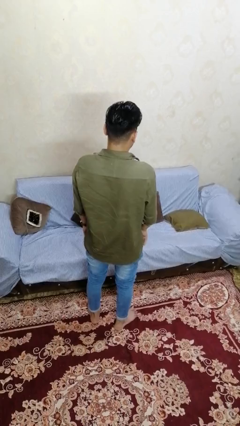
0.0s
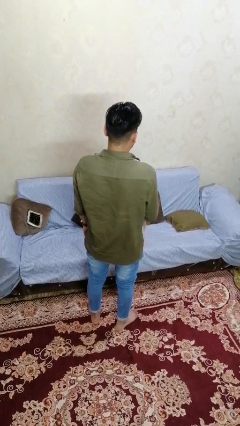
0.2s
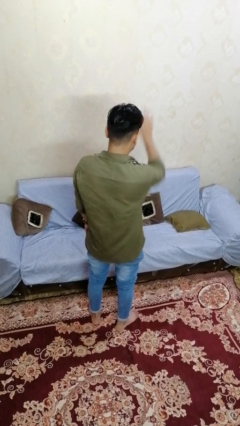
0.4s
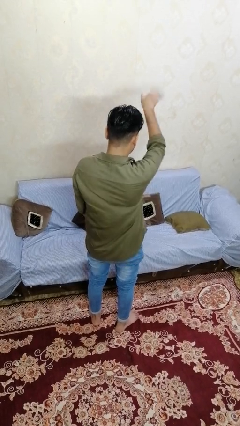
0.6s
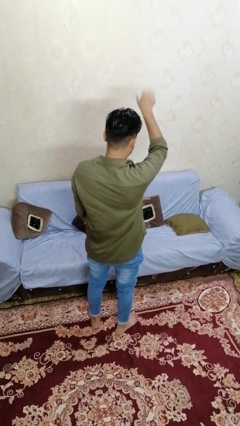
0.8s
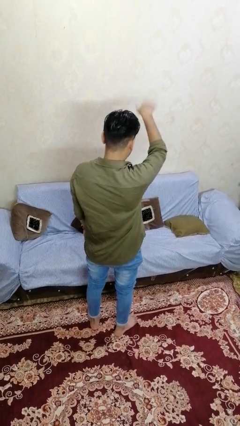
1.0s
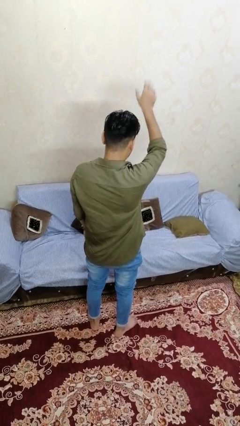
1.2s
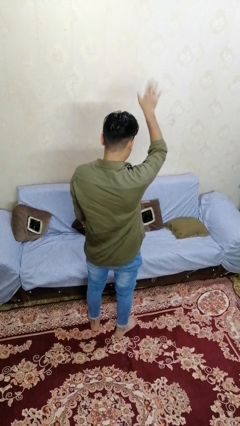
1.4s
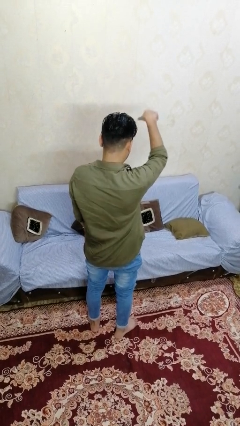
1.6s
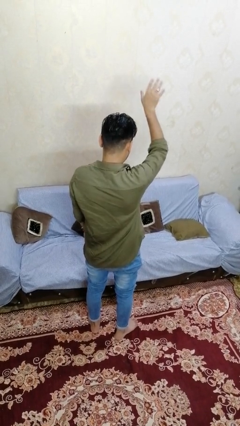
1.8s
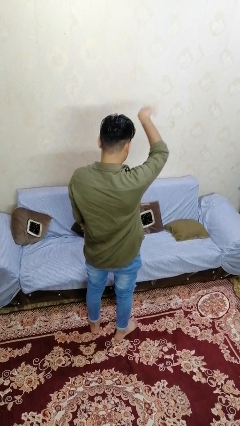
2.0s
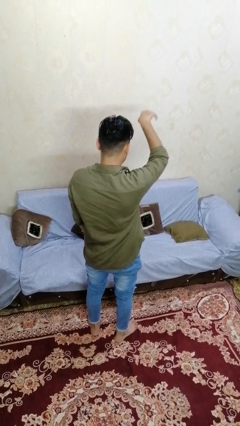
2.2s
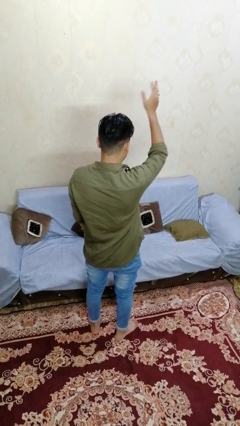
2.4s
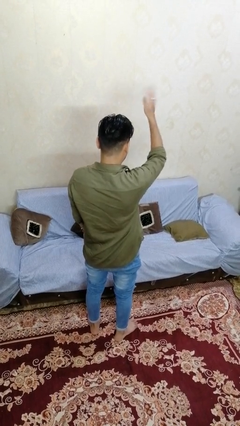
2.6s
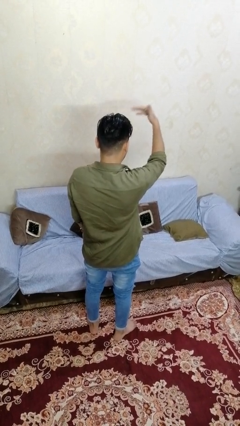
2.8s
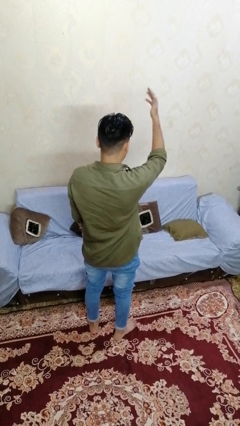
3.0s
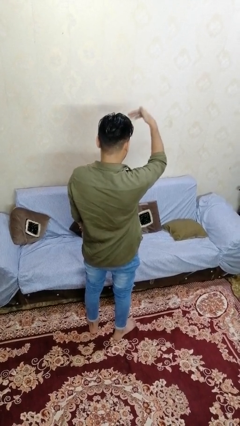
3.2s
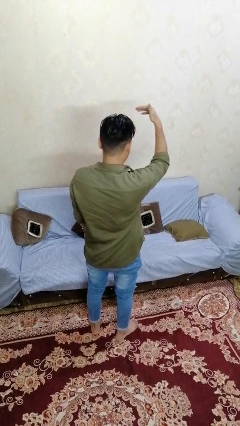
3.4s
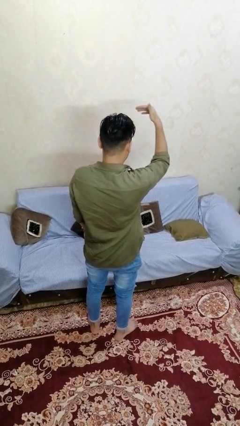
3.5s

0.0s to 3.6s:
person gestures come here

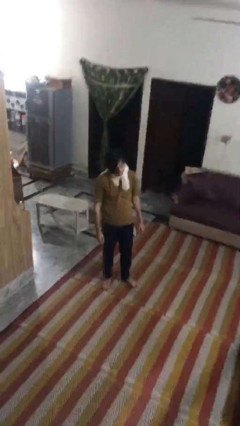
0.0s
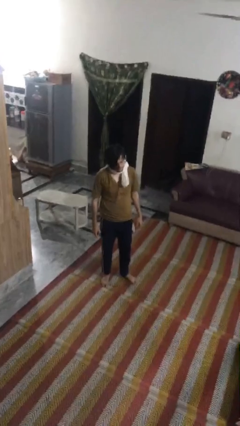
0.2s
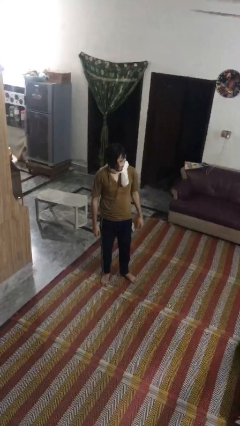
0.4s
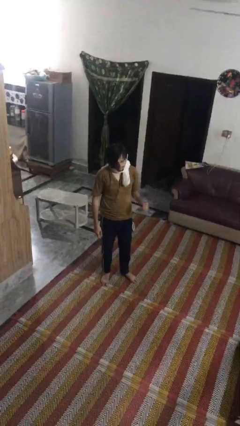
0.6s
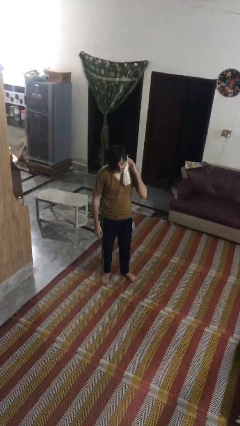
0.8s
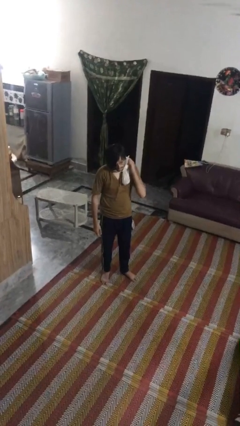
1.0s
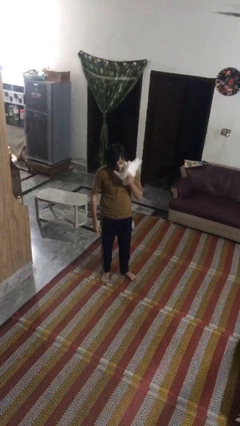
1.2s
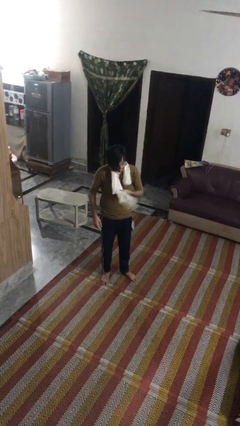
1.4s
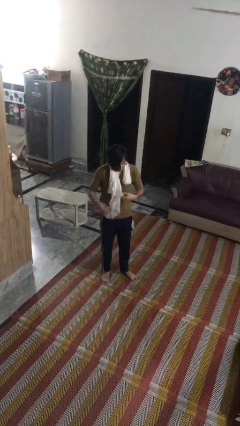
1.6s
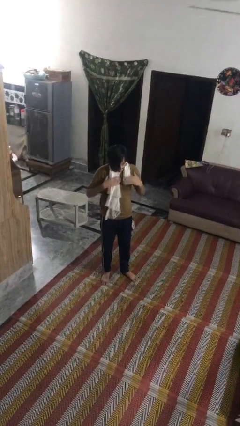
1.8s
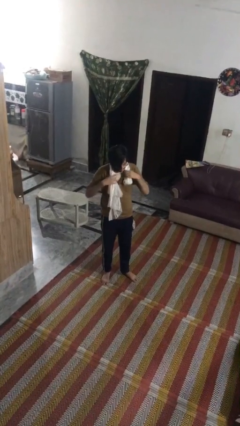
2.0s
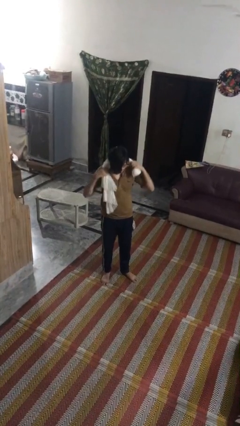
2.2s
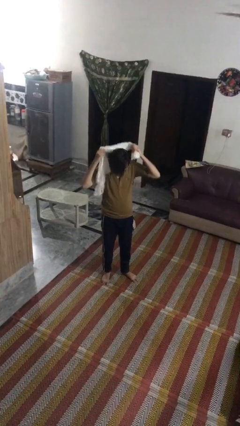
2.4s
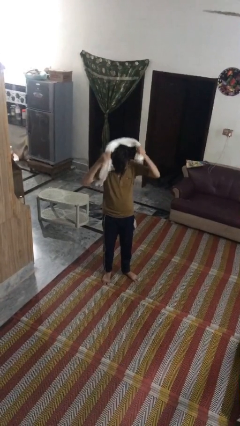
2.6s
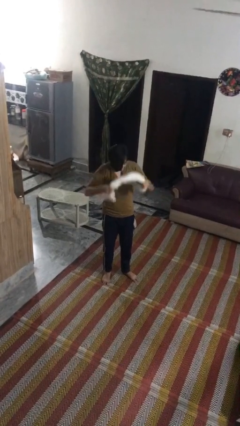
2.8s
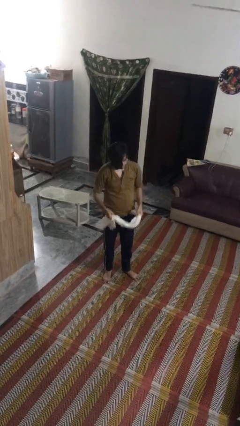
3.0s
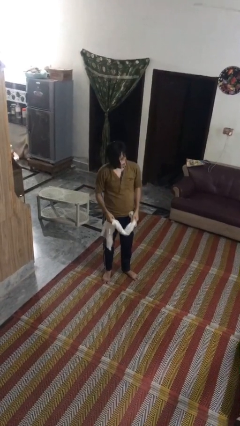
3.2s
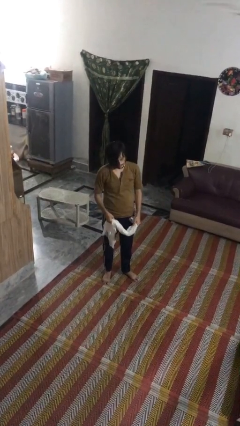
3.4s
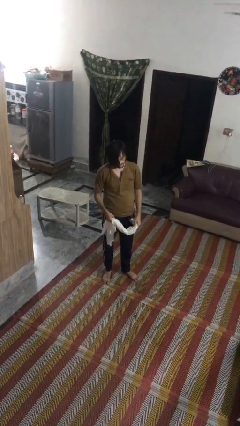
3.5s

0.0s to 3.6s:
person takes off scarf

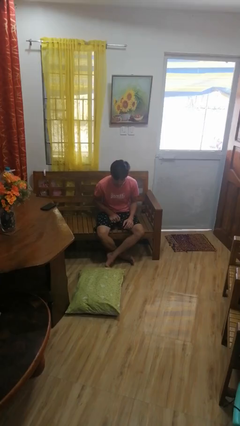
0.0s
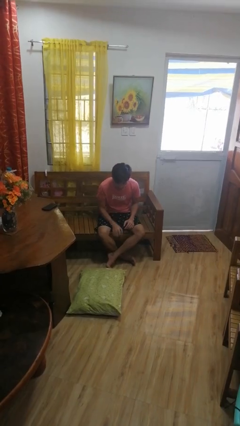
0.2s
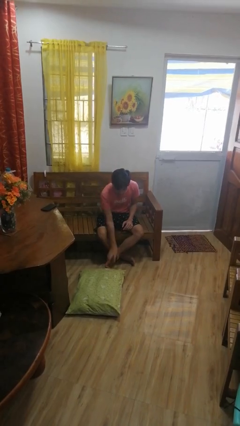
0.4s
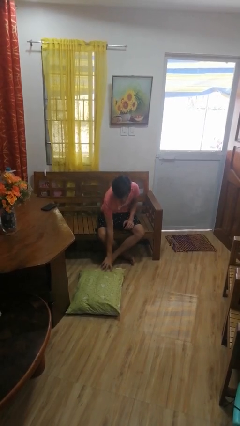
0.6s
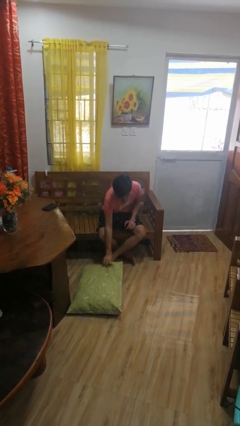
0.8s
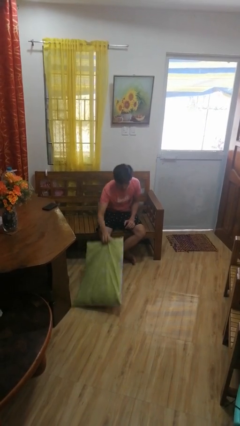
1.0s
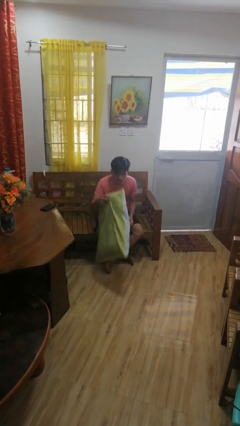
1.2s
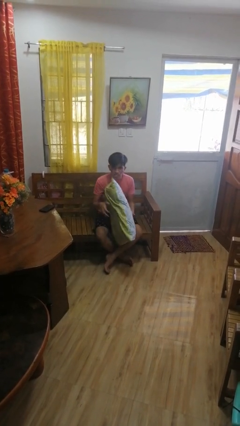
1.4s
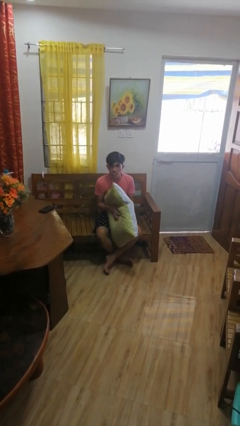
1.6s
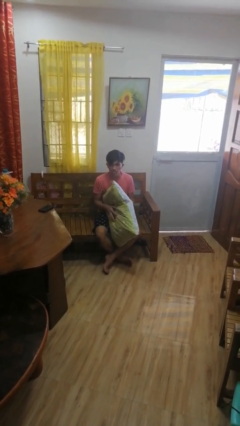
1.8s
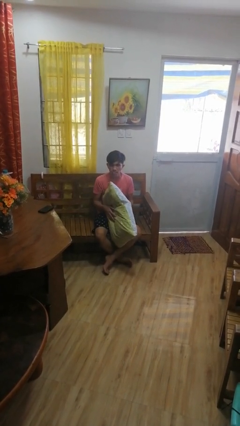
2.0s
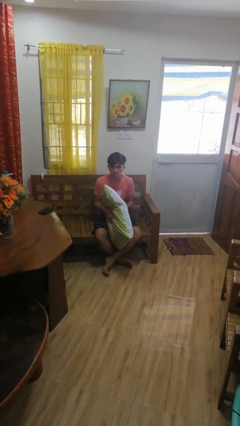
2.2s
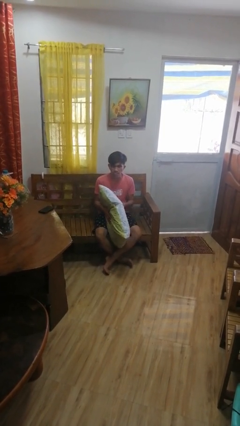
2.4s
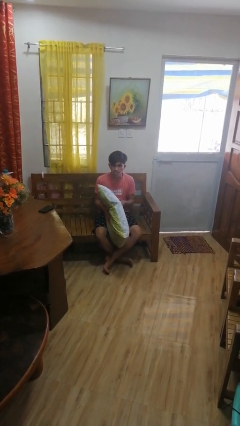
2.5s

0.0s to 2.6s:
person picks up object from floor

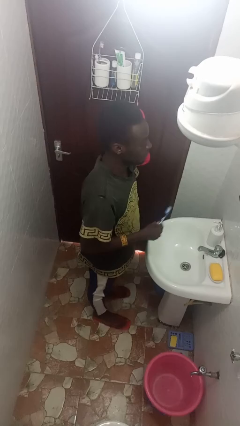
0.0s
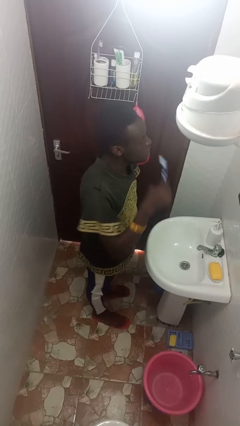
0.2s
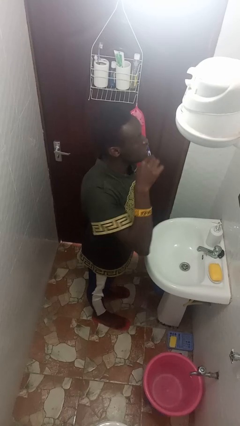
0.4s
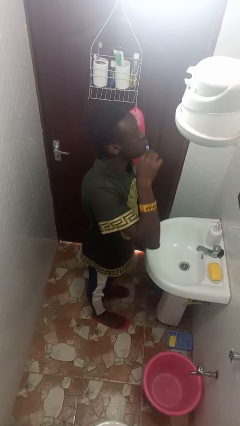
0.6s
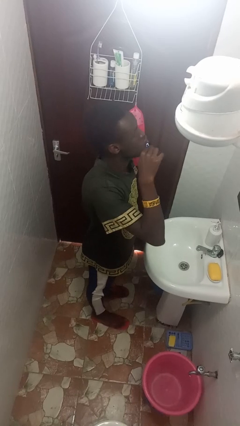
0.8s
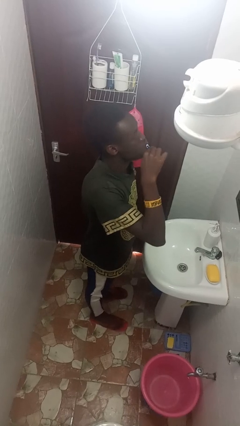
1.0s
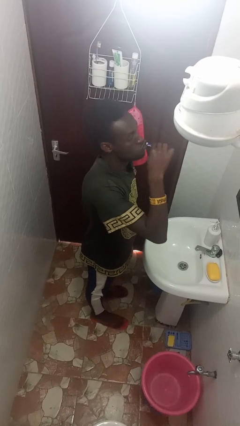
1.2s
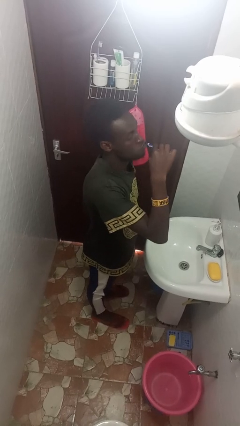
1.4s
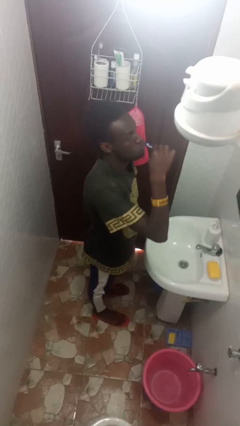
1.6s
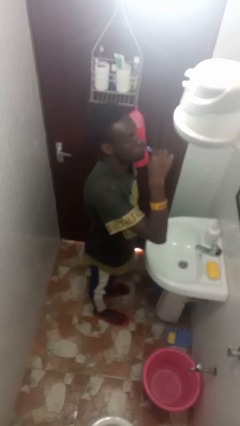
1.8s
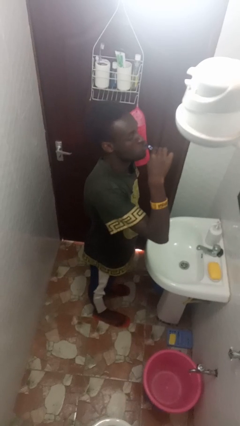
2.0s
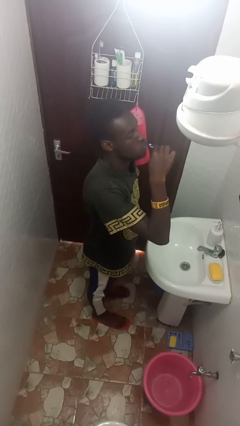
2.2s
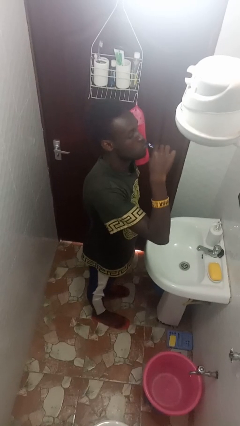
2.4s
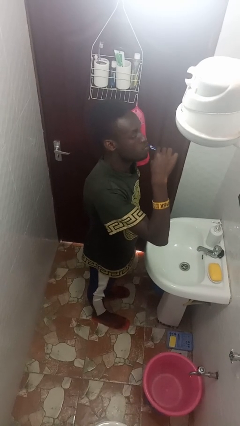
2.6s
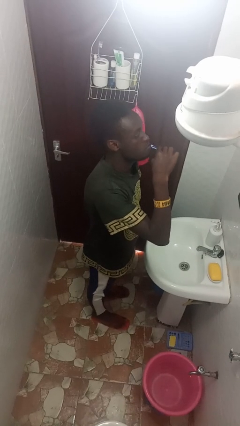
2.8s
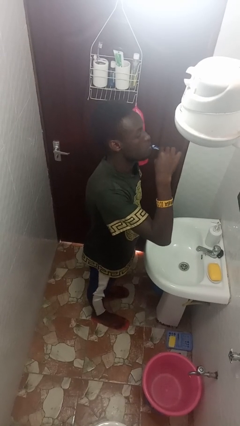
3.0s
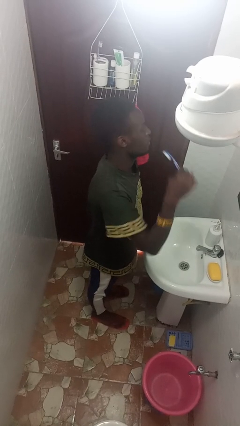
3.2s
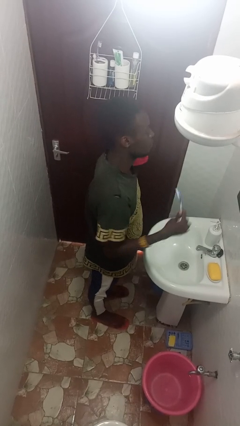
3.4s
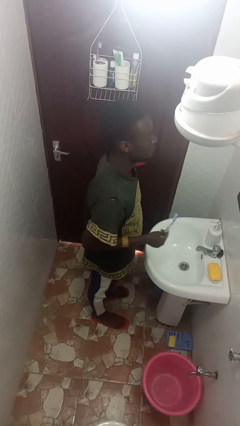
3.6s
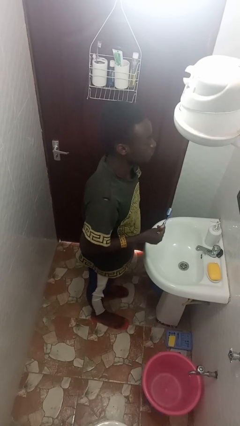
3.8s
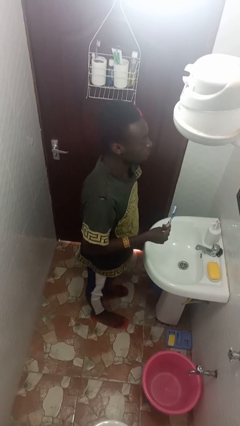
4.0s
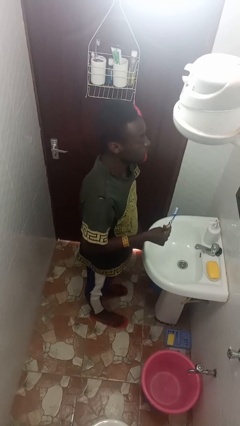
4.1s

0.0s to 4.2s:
person brushes teeth

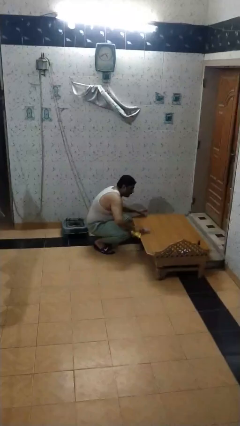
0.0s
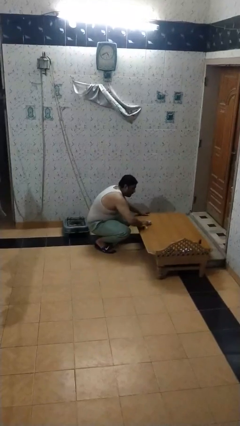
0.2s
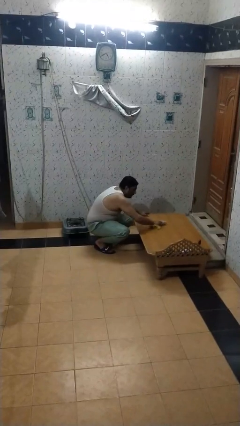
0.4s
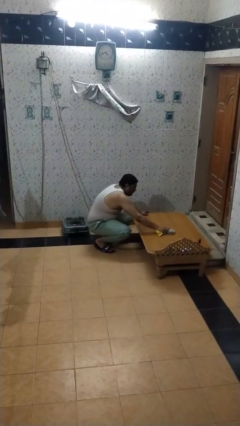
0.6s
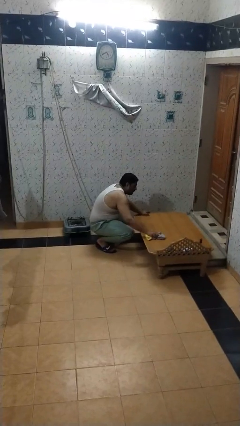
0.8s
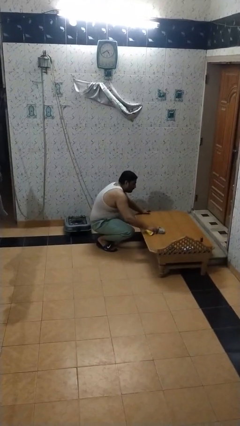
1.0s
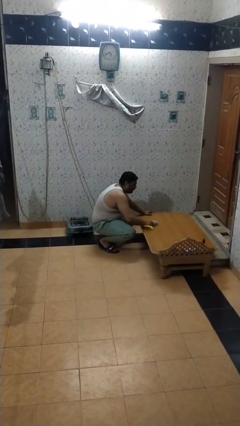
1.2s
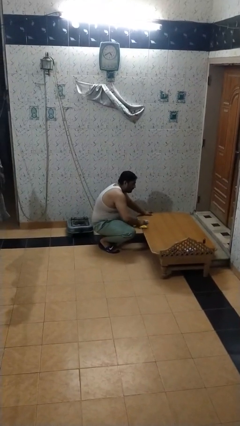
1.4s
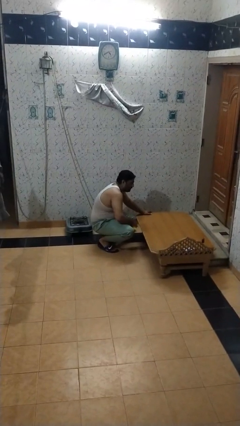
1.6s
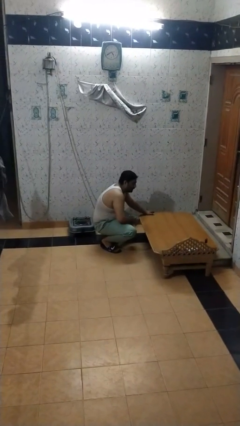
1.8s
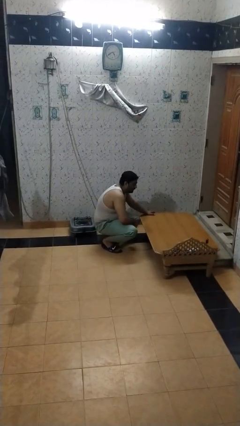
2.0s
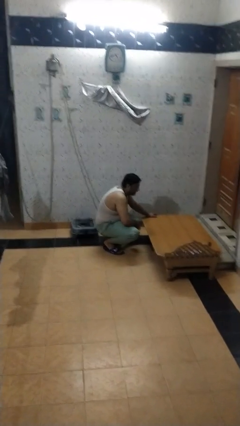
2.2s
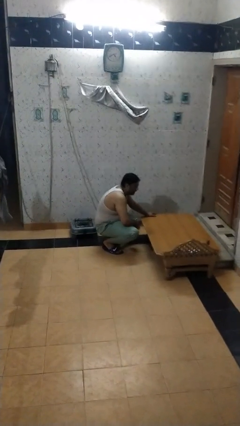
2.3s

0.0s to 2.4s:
person cleans table with rag

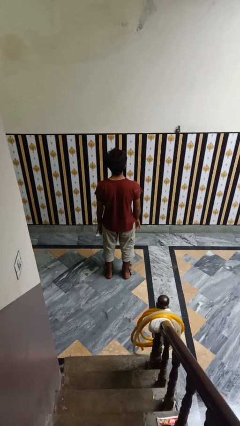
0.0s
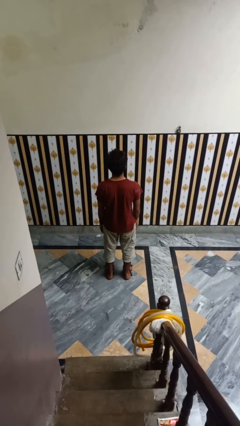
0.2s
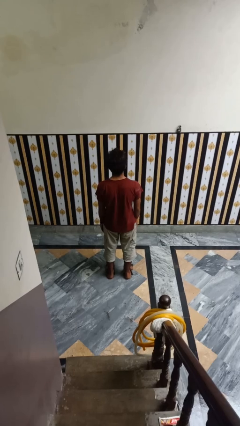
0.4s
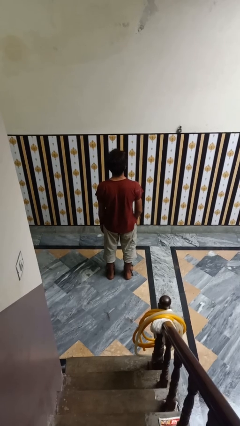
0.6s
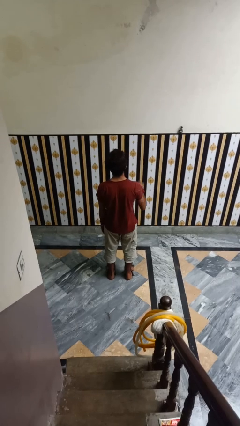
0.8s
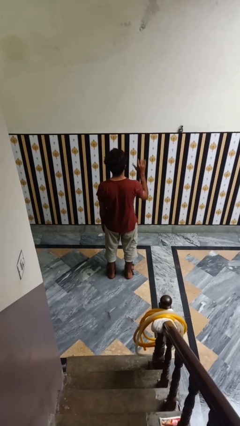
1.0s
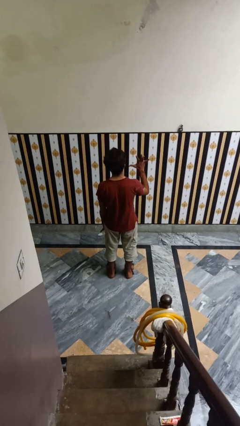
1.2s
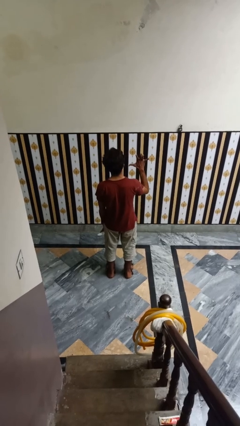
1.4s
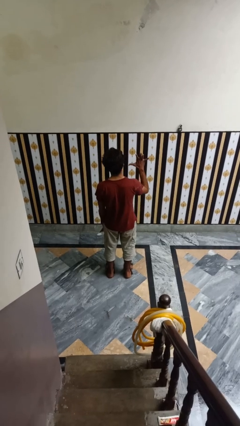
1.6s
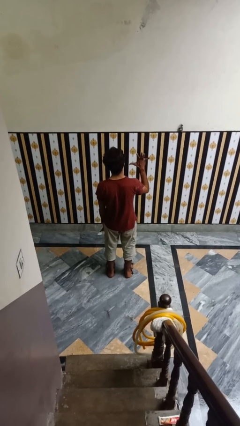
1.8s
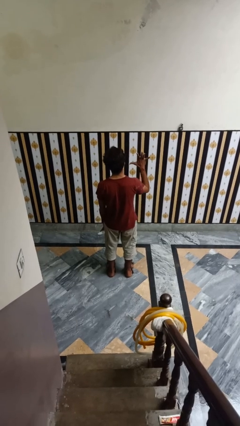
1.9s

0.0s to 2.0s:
person gestures number five
